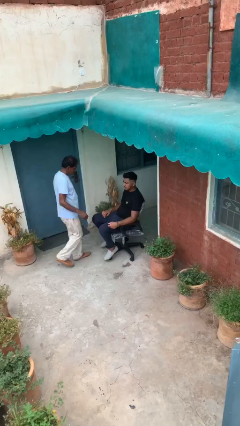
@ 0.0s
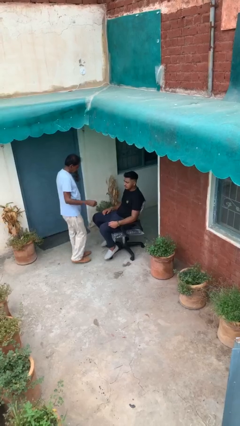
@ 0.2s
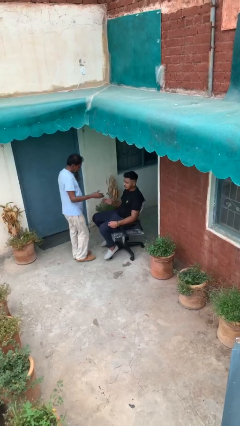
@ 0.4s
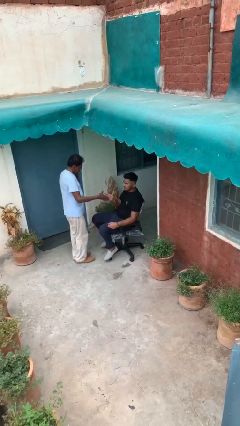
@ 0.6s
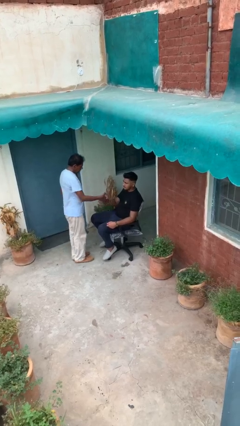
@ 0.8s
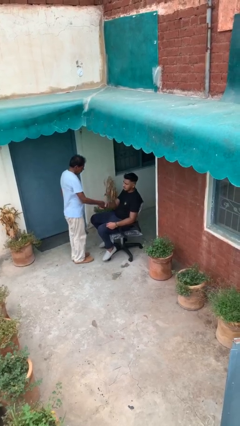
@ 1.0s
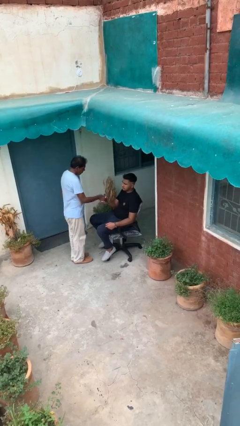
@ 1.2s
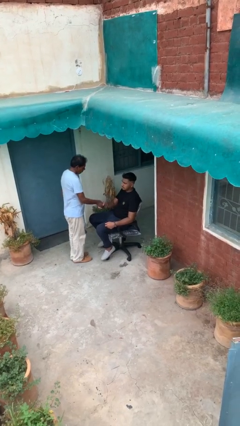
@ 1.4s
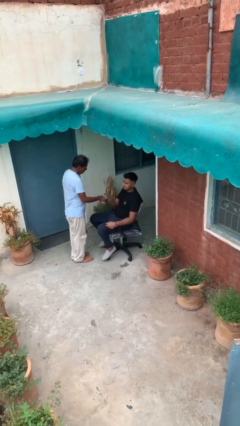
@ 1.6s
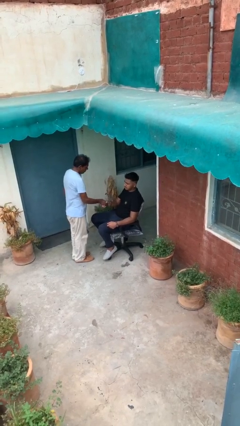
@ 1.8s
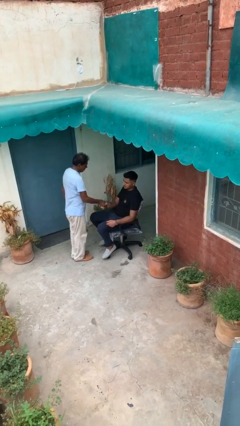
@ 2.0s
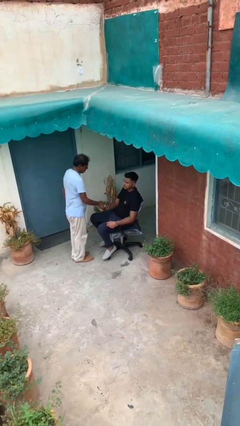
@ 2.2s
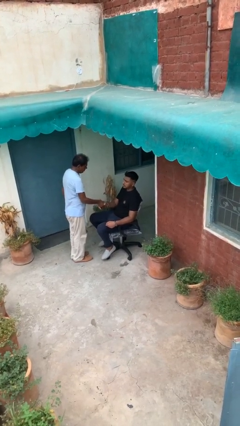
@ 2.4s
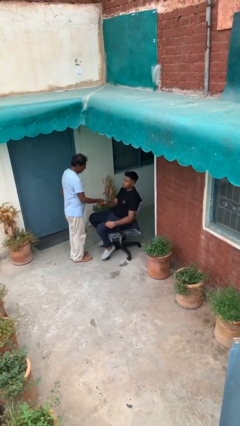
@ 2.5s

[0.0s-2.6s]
person shakes hand

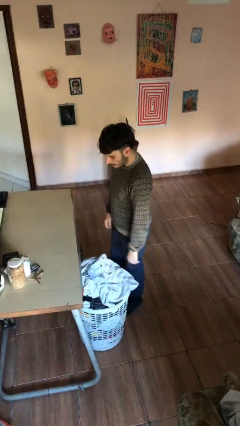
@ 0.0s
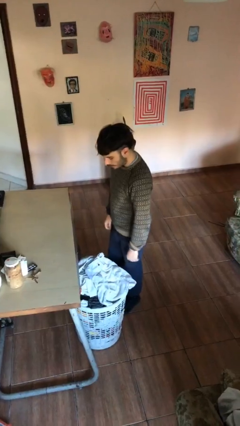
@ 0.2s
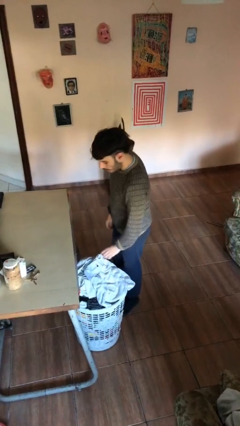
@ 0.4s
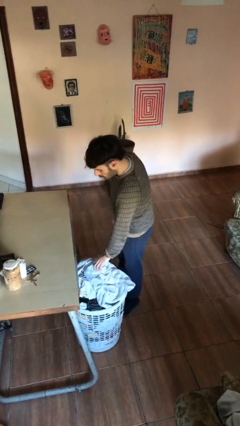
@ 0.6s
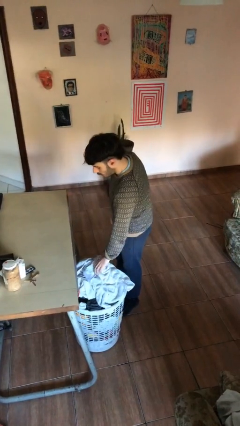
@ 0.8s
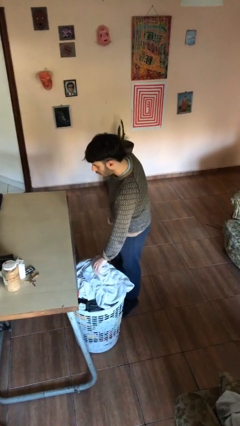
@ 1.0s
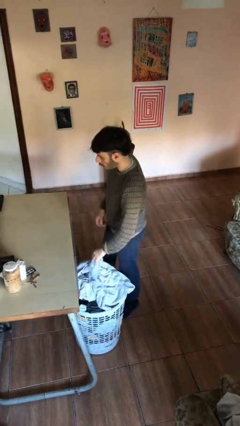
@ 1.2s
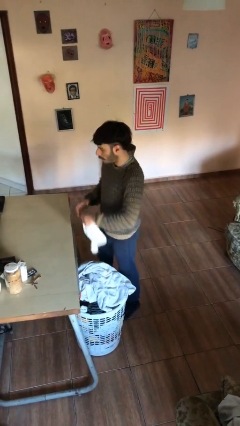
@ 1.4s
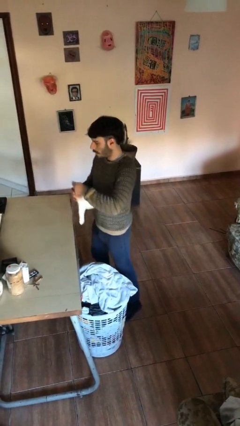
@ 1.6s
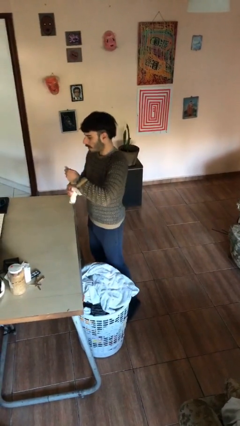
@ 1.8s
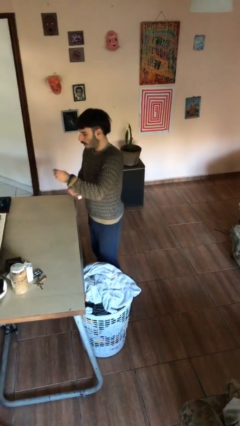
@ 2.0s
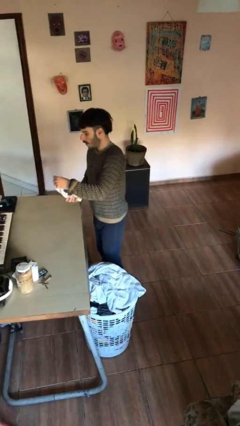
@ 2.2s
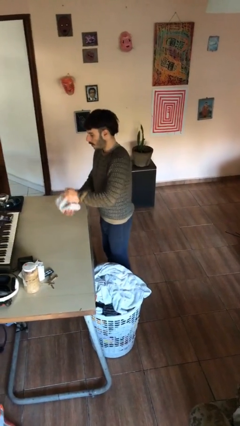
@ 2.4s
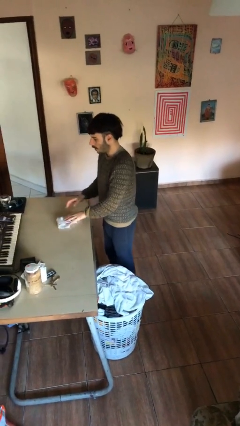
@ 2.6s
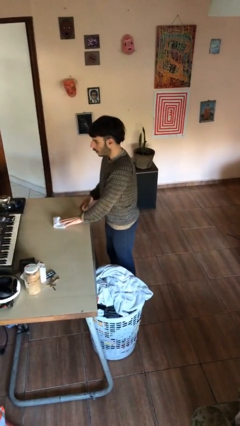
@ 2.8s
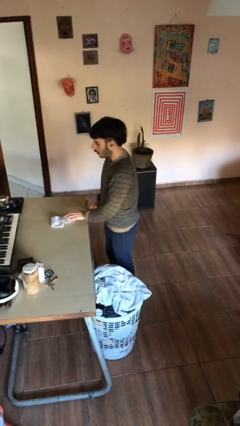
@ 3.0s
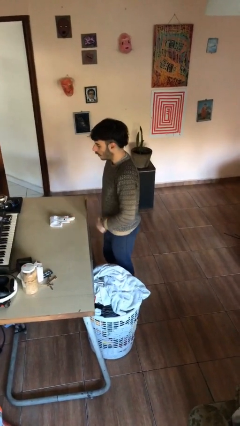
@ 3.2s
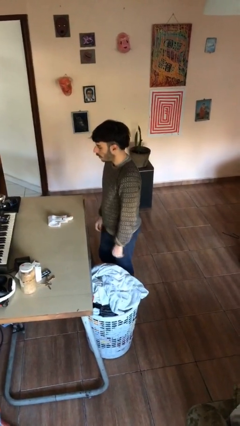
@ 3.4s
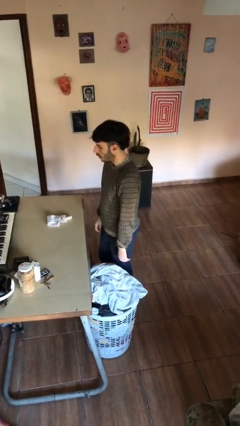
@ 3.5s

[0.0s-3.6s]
person folds socks

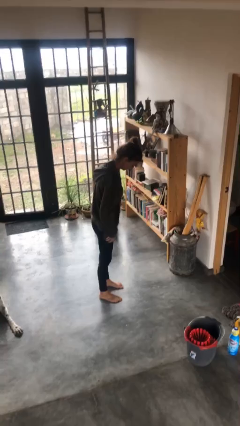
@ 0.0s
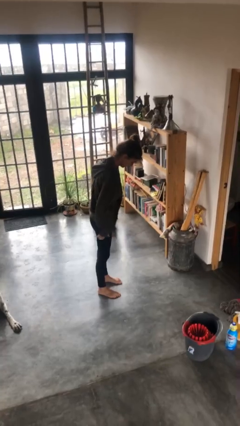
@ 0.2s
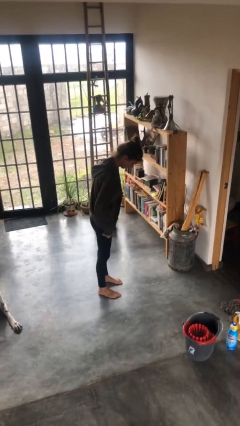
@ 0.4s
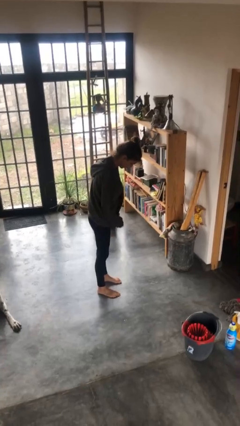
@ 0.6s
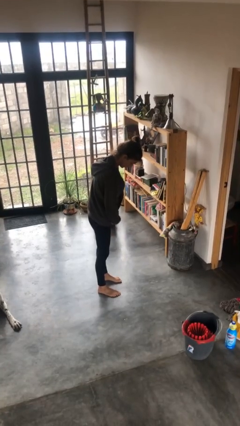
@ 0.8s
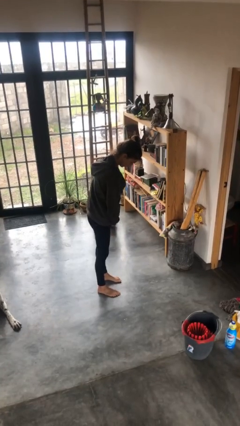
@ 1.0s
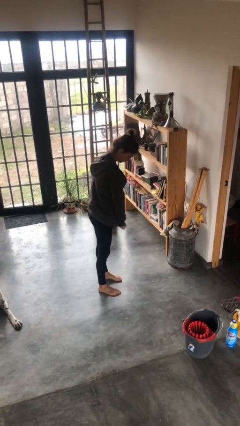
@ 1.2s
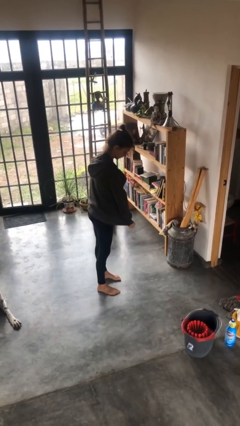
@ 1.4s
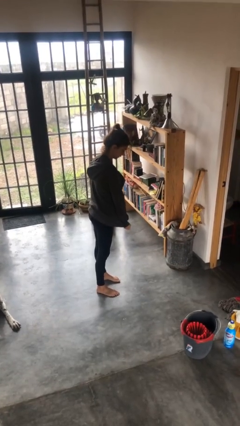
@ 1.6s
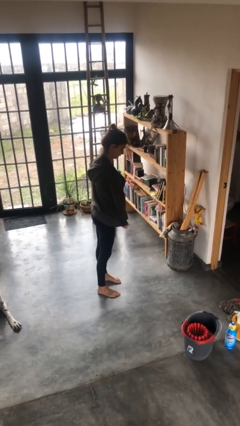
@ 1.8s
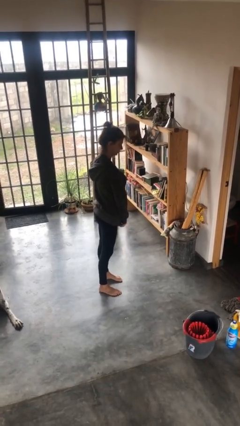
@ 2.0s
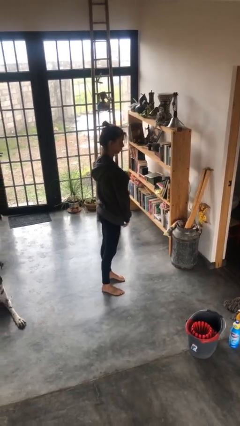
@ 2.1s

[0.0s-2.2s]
person zips up jacket

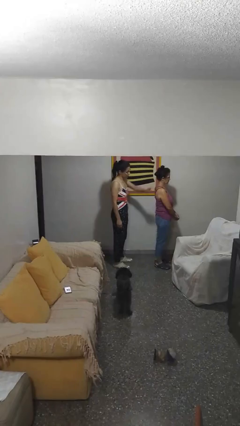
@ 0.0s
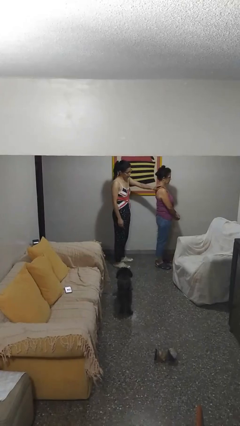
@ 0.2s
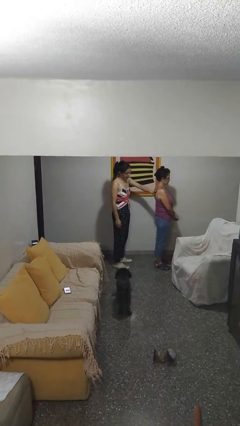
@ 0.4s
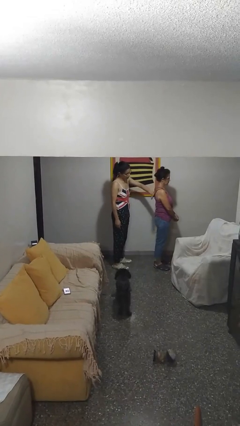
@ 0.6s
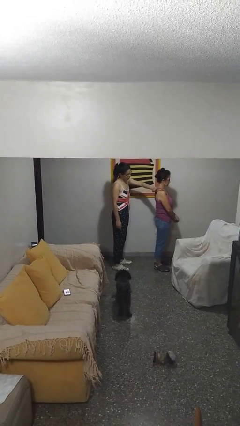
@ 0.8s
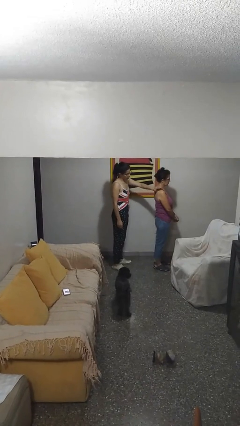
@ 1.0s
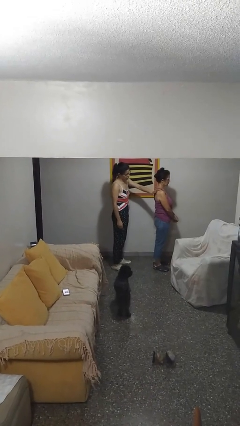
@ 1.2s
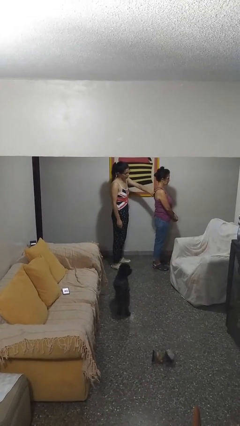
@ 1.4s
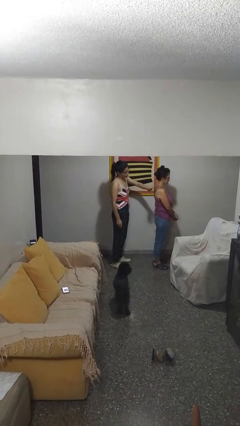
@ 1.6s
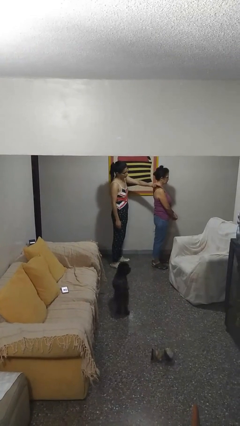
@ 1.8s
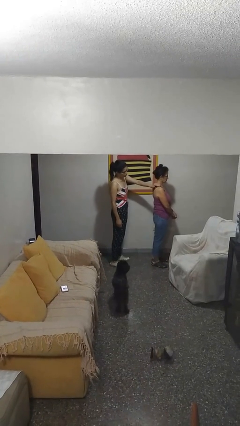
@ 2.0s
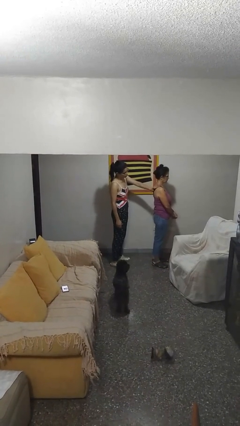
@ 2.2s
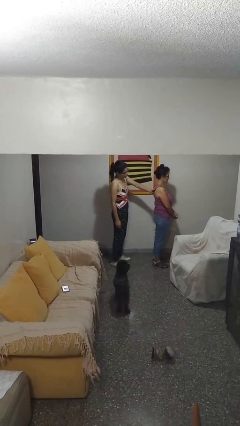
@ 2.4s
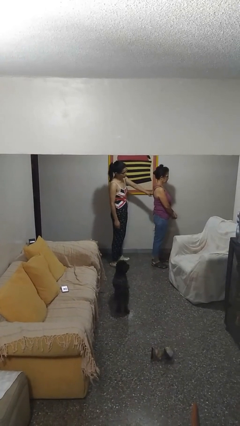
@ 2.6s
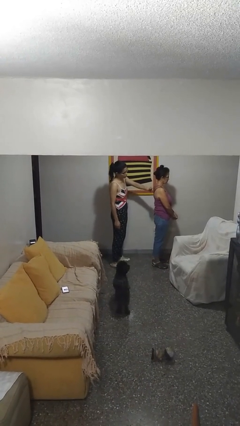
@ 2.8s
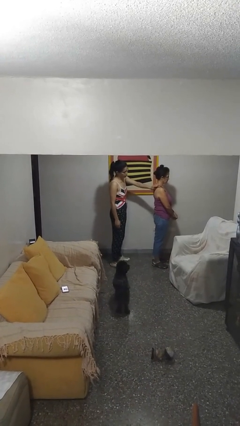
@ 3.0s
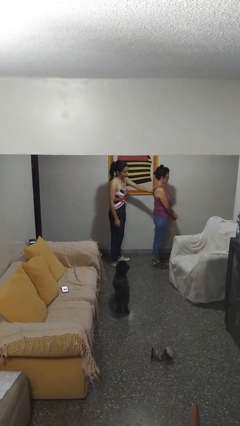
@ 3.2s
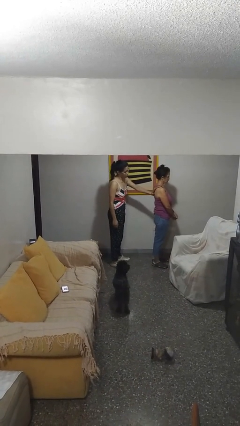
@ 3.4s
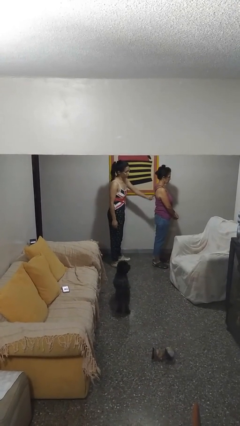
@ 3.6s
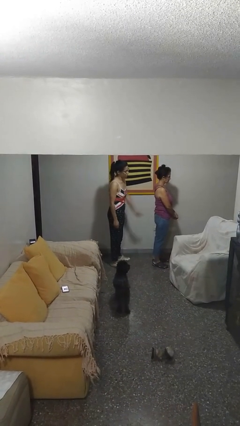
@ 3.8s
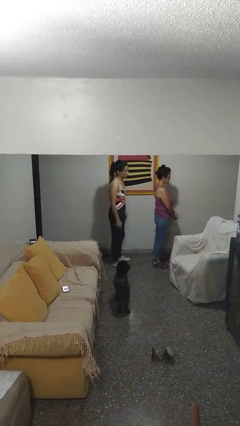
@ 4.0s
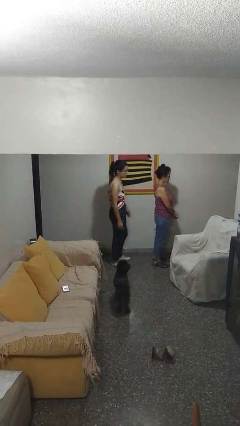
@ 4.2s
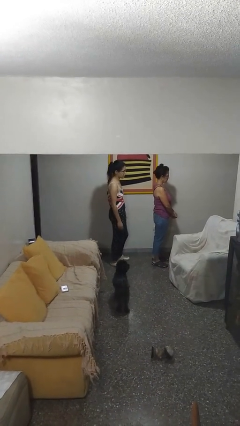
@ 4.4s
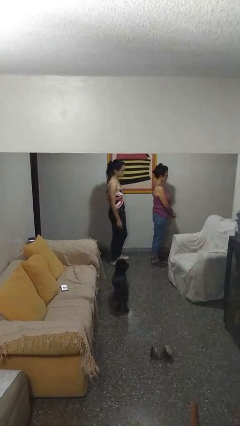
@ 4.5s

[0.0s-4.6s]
person touches back of person

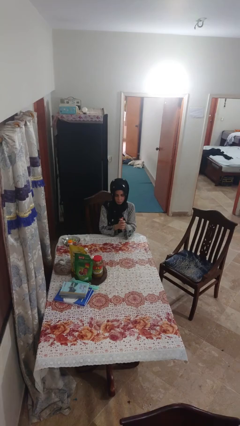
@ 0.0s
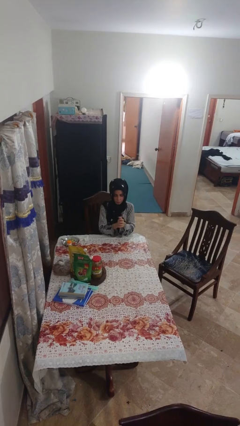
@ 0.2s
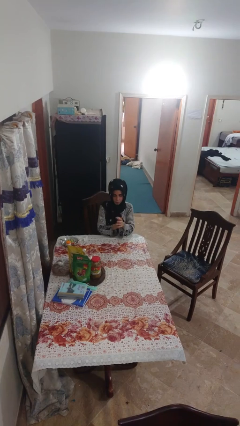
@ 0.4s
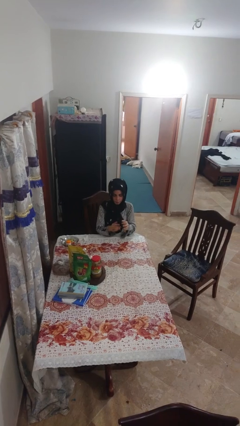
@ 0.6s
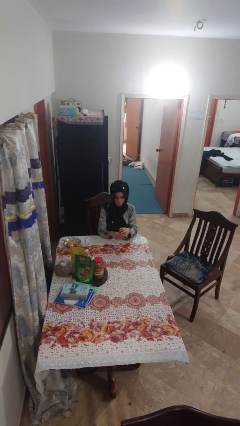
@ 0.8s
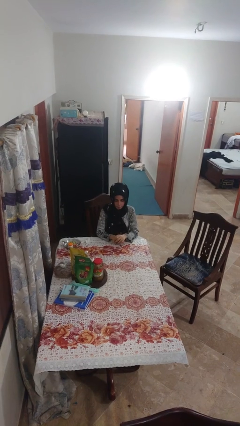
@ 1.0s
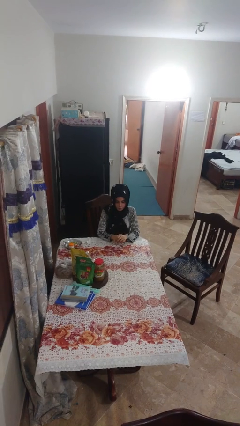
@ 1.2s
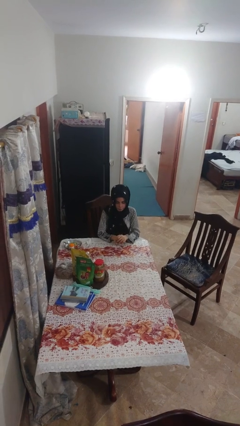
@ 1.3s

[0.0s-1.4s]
person claps hands

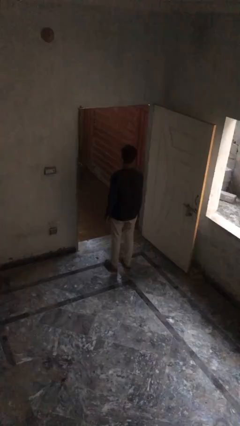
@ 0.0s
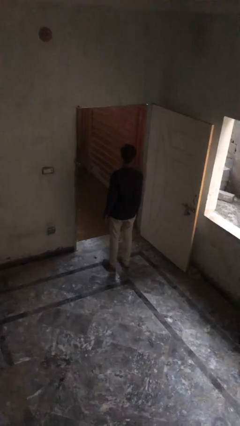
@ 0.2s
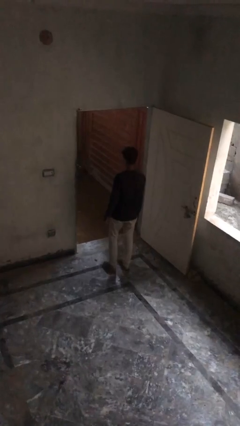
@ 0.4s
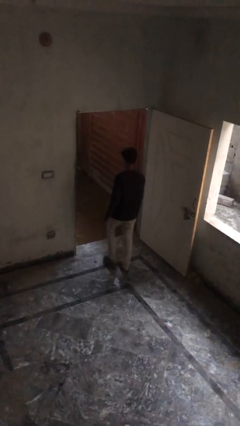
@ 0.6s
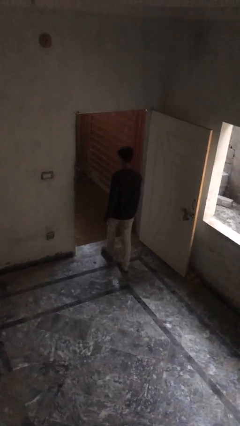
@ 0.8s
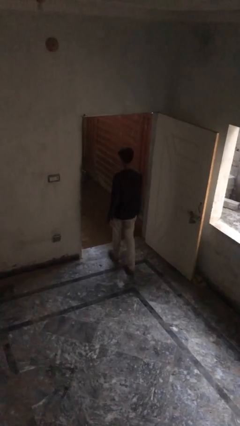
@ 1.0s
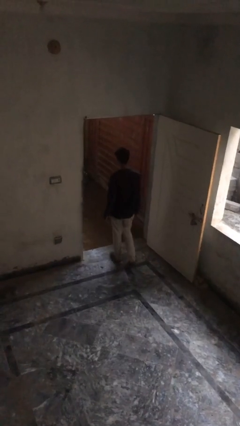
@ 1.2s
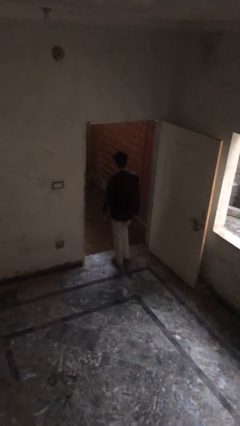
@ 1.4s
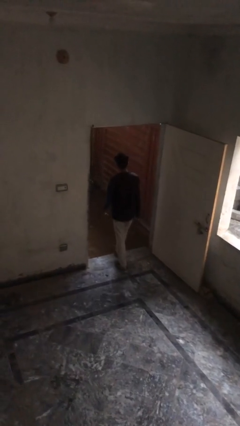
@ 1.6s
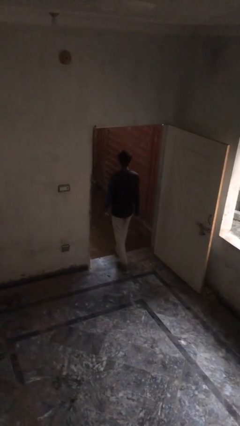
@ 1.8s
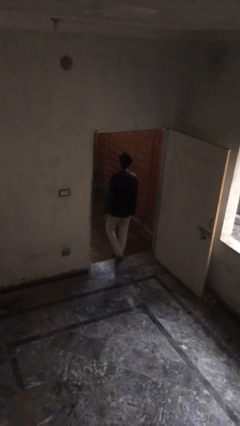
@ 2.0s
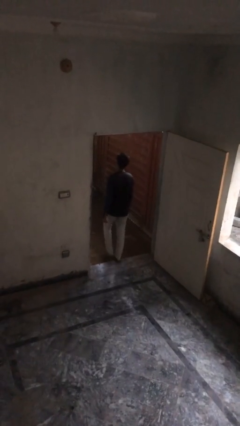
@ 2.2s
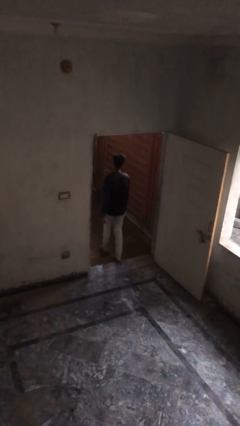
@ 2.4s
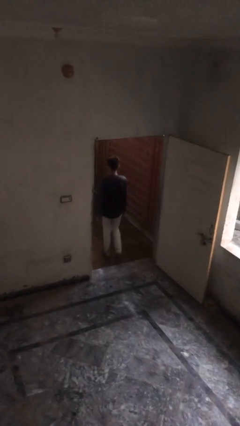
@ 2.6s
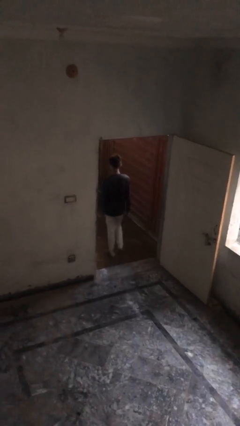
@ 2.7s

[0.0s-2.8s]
person exits scene through structure

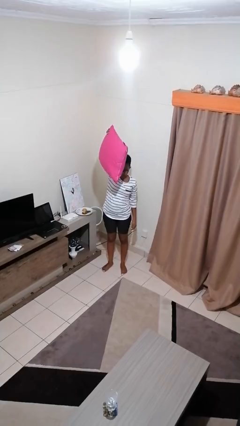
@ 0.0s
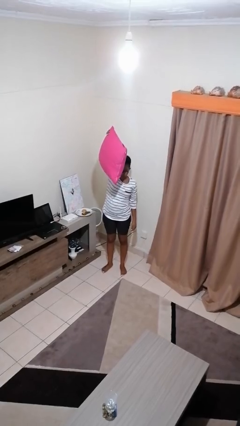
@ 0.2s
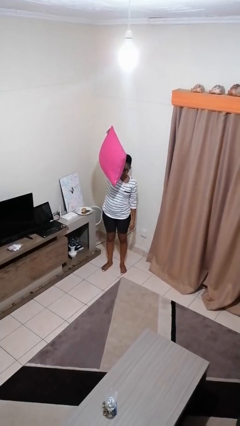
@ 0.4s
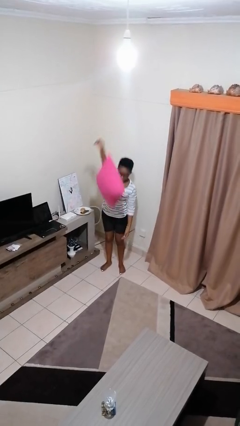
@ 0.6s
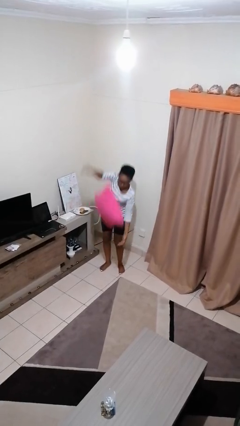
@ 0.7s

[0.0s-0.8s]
person drops object
